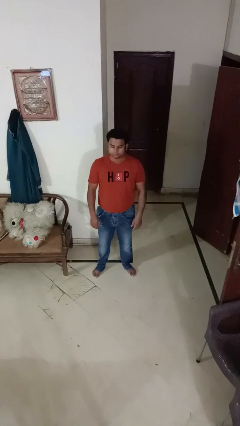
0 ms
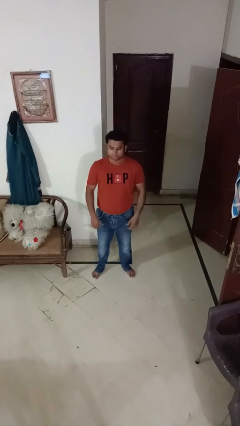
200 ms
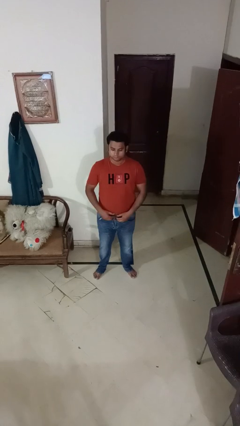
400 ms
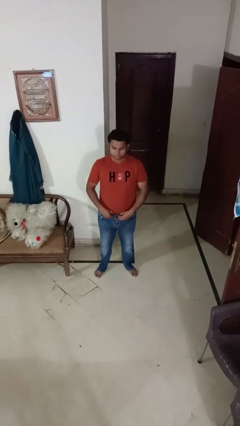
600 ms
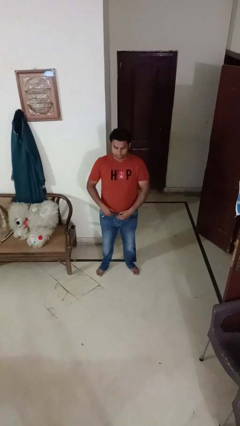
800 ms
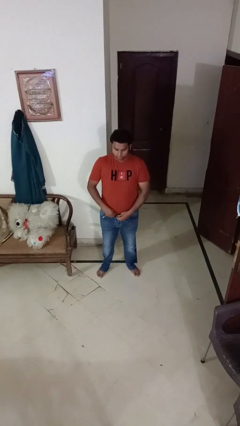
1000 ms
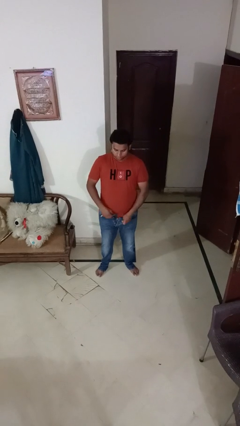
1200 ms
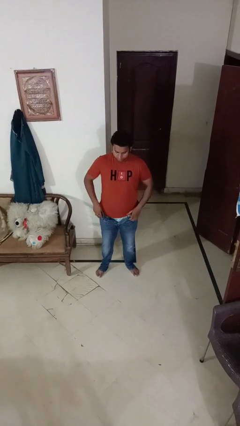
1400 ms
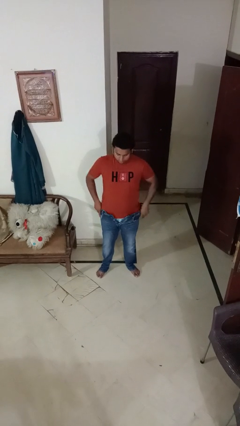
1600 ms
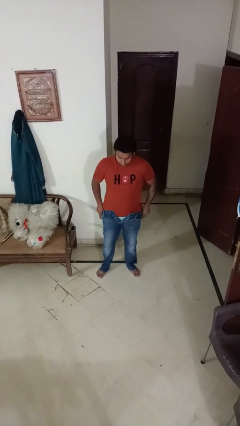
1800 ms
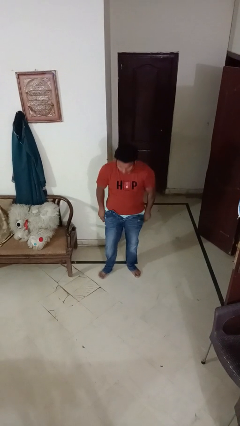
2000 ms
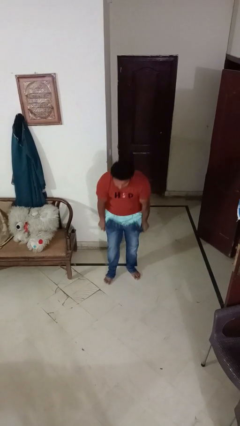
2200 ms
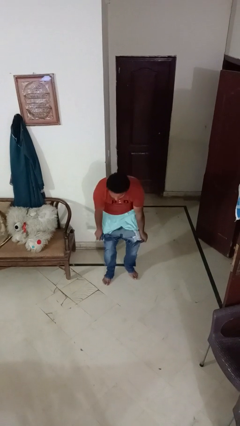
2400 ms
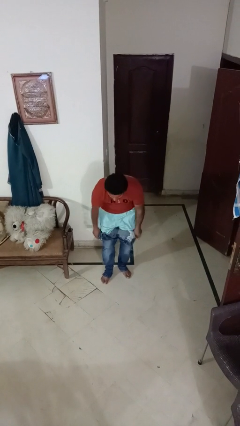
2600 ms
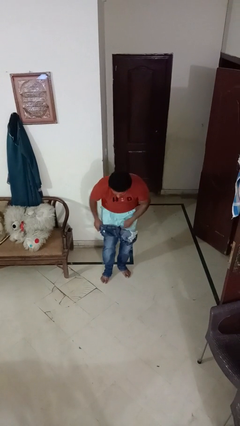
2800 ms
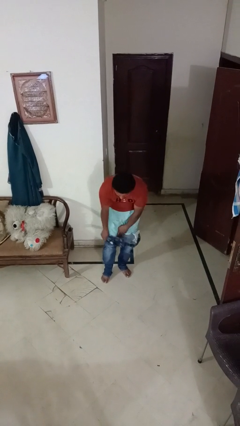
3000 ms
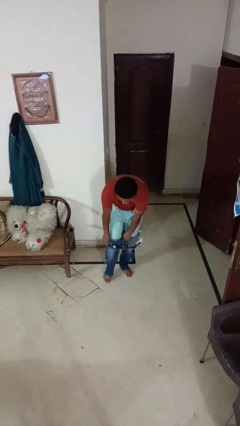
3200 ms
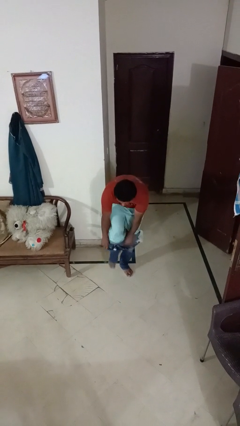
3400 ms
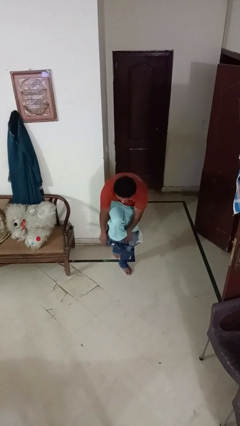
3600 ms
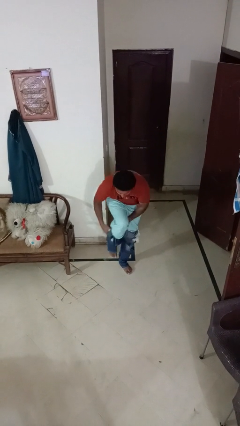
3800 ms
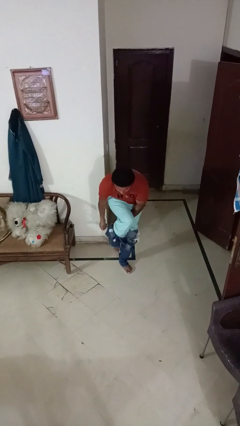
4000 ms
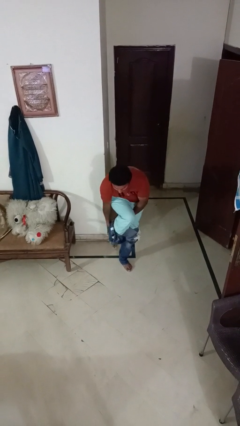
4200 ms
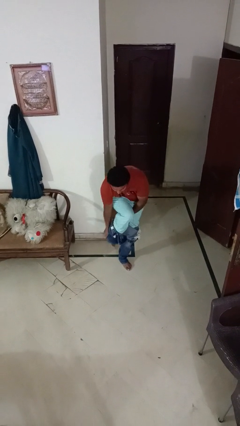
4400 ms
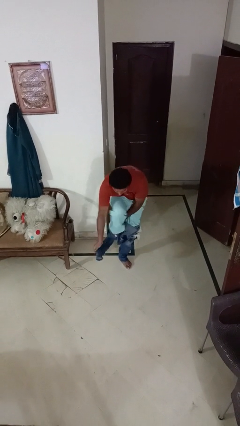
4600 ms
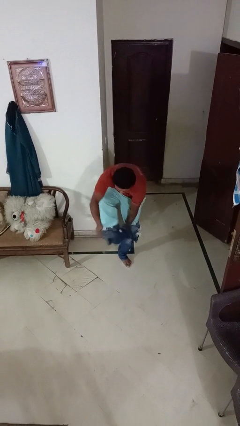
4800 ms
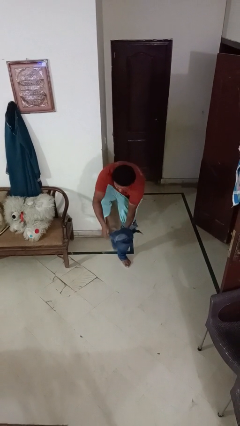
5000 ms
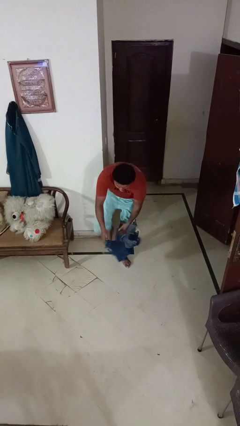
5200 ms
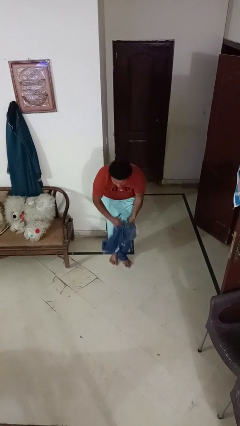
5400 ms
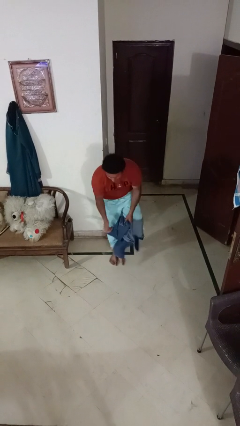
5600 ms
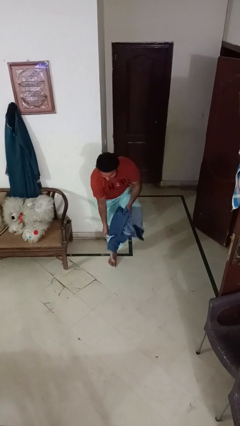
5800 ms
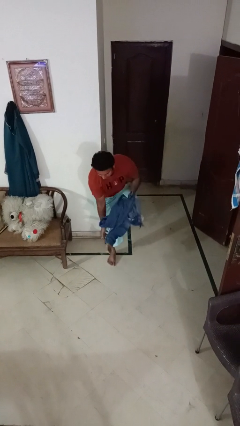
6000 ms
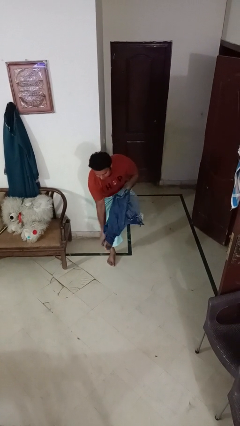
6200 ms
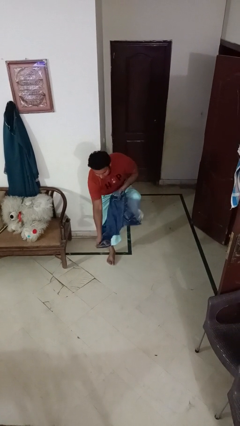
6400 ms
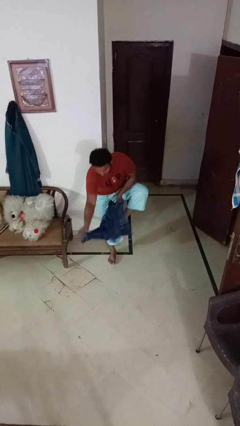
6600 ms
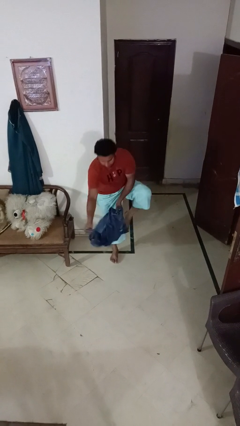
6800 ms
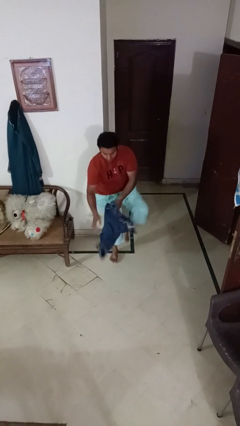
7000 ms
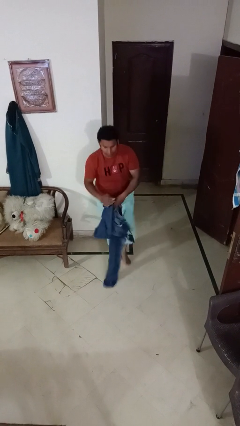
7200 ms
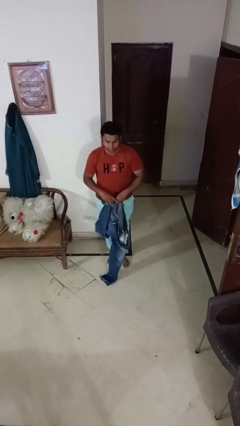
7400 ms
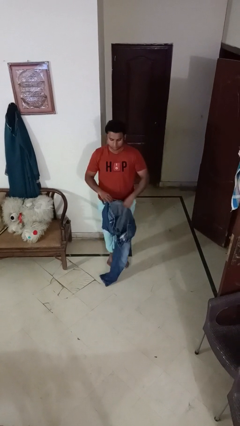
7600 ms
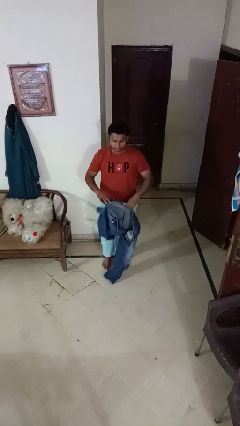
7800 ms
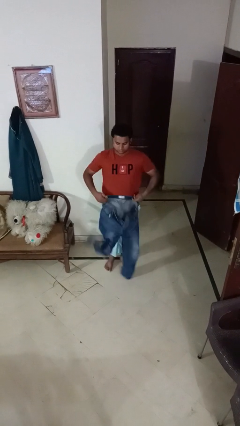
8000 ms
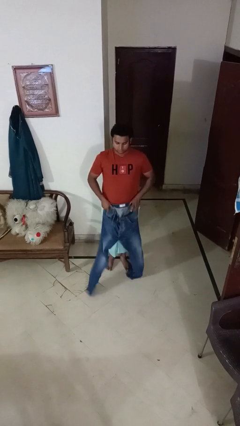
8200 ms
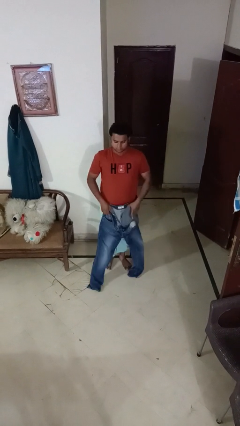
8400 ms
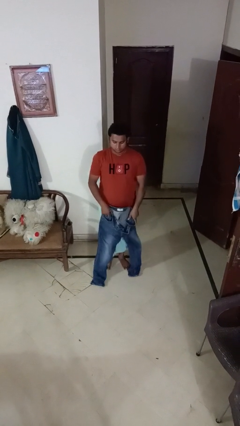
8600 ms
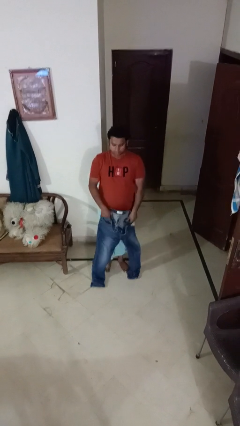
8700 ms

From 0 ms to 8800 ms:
person takes off pants

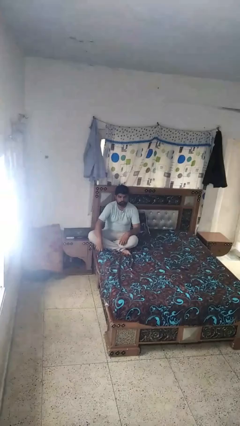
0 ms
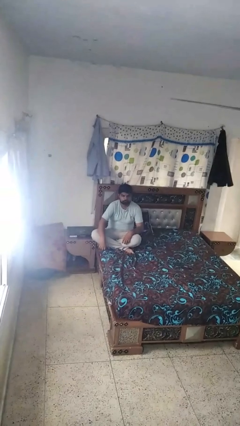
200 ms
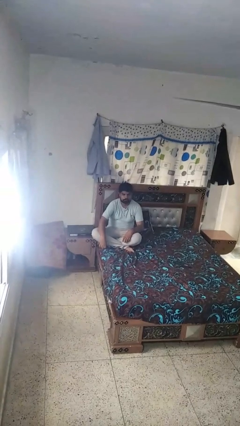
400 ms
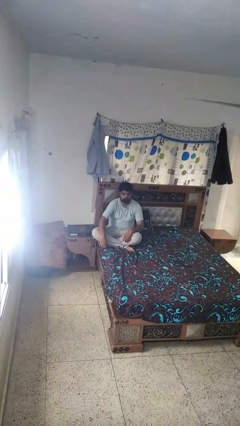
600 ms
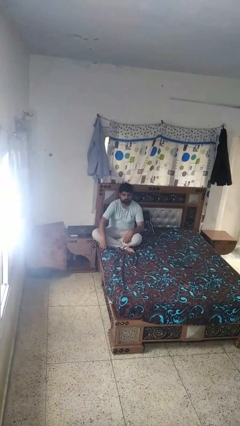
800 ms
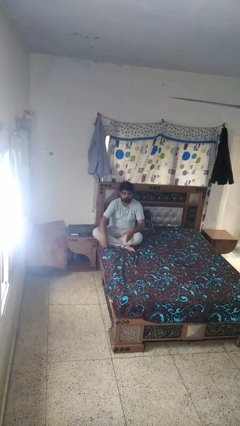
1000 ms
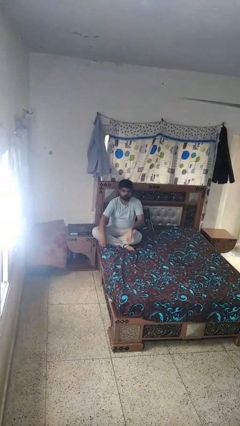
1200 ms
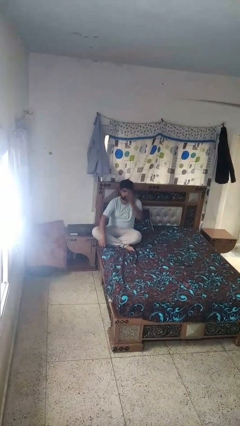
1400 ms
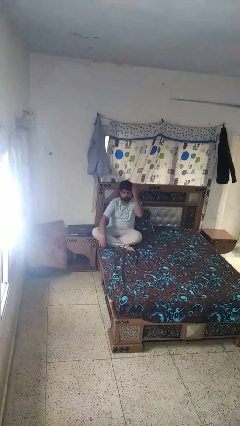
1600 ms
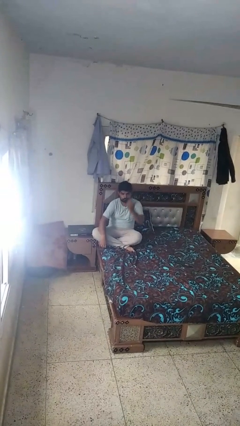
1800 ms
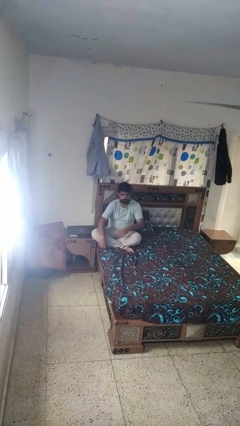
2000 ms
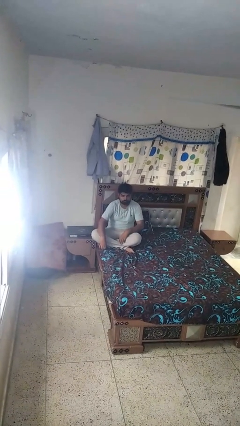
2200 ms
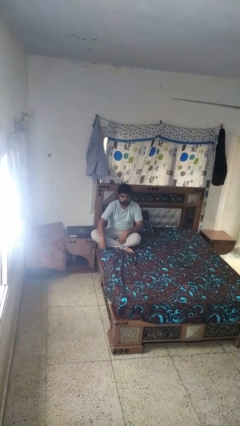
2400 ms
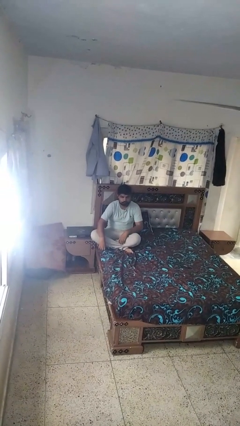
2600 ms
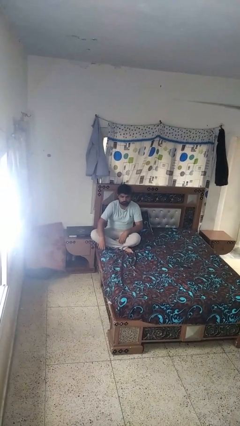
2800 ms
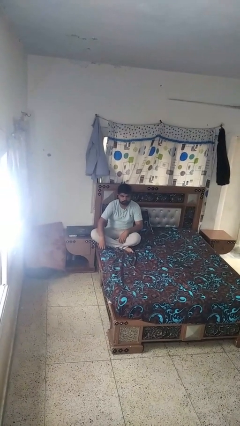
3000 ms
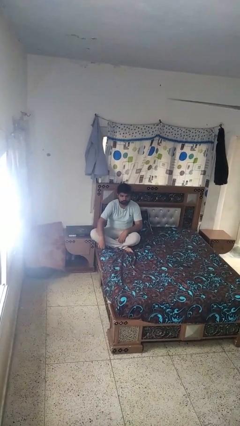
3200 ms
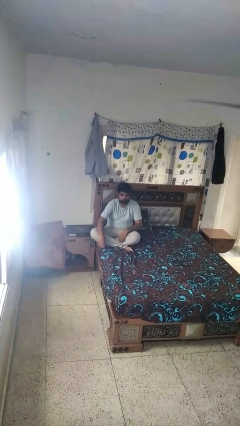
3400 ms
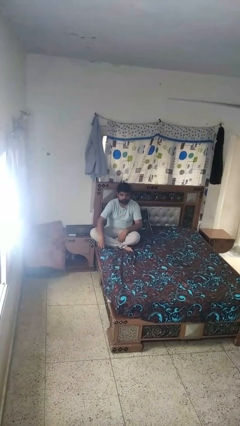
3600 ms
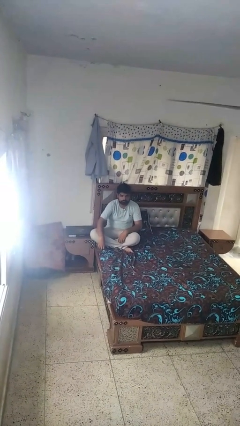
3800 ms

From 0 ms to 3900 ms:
person gestures swipe up

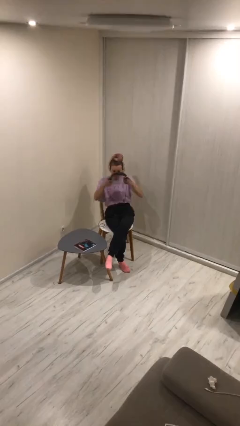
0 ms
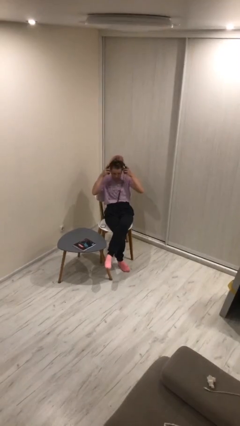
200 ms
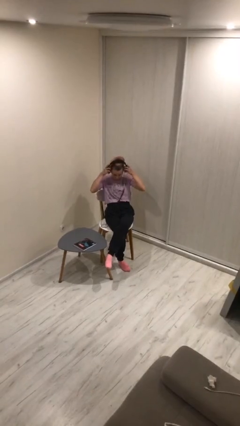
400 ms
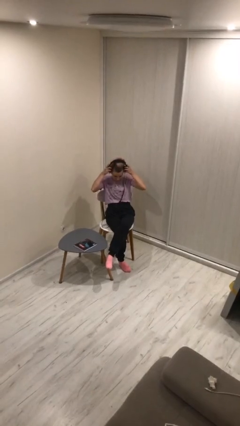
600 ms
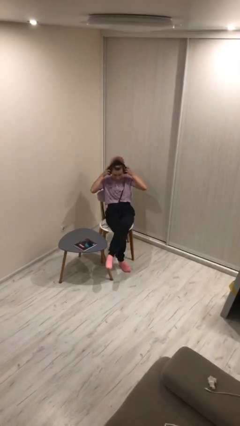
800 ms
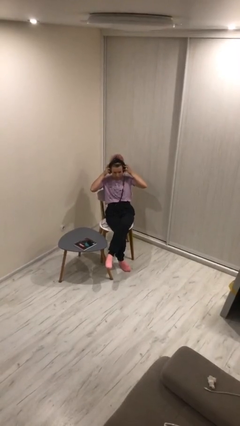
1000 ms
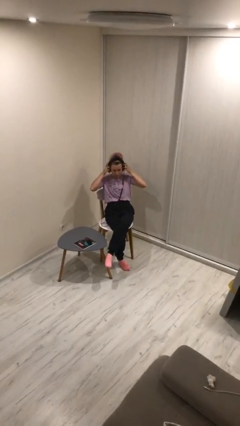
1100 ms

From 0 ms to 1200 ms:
person puts on headphones

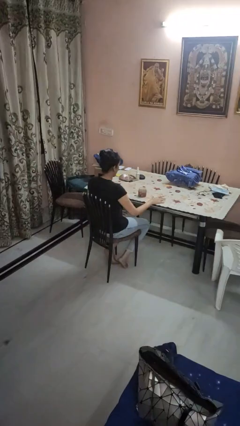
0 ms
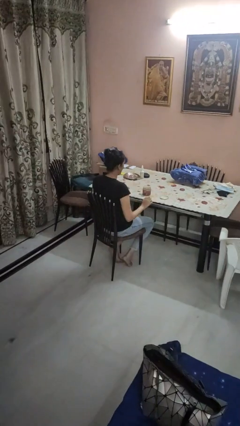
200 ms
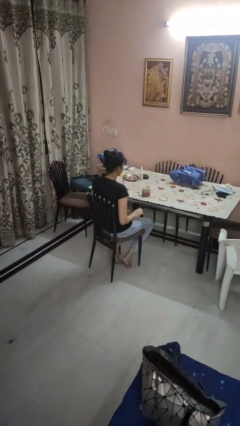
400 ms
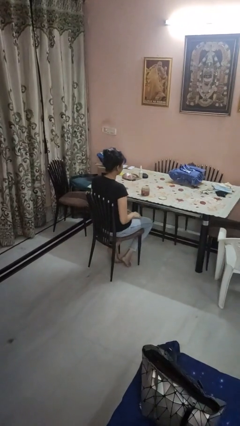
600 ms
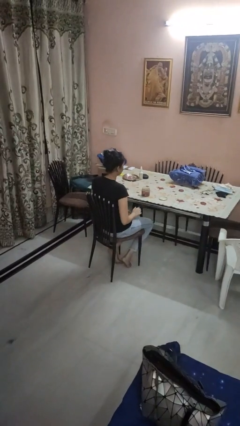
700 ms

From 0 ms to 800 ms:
person opens jar

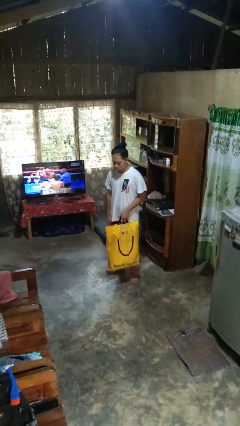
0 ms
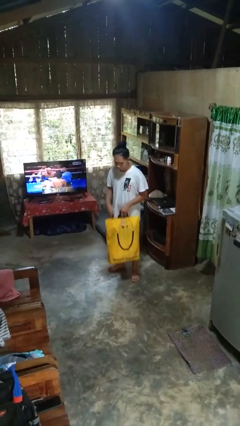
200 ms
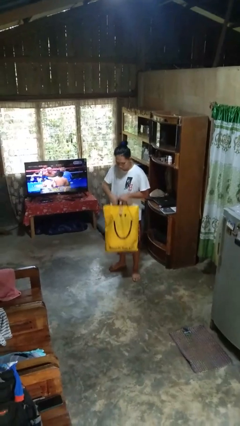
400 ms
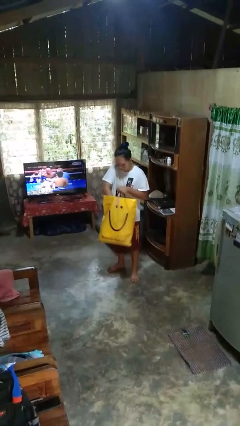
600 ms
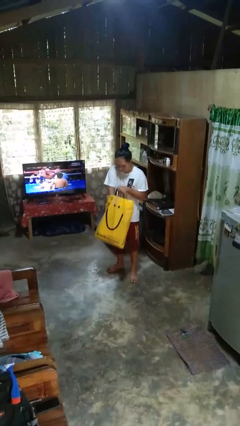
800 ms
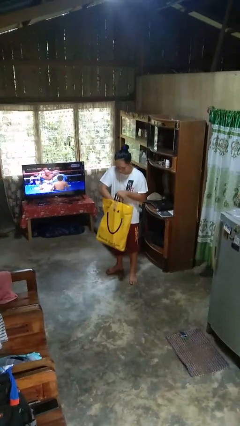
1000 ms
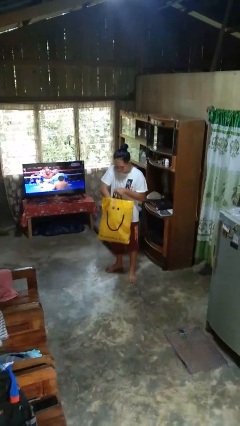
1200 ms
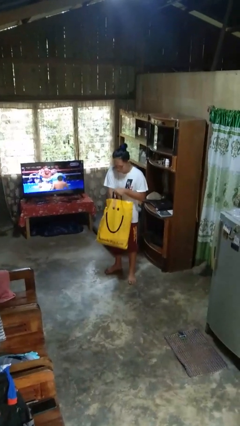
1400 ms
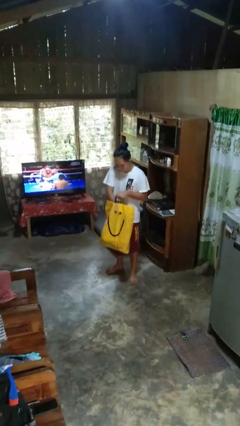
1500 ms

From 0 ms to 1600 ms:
person searches in bag

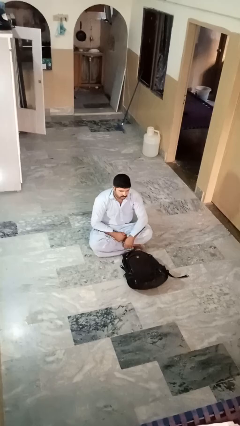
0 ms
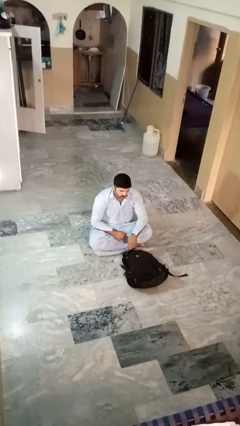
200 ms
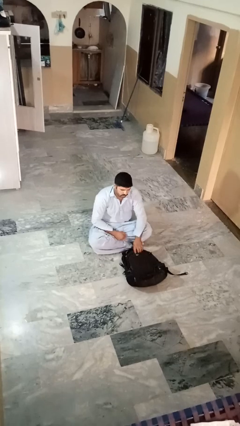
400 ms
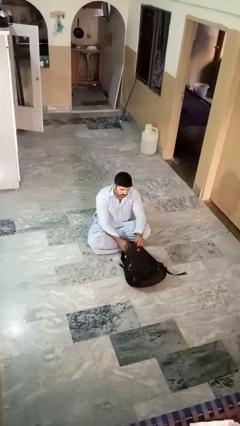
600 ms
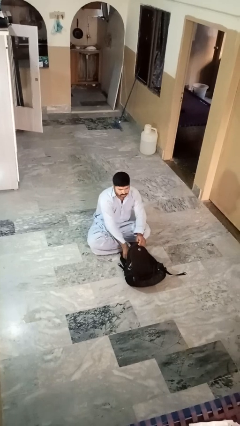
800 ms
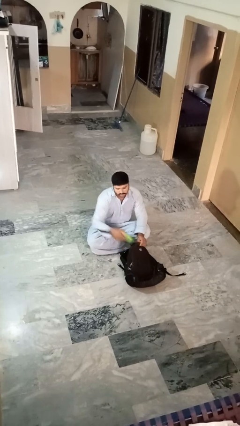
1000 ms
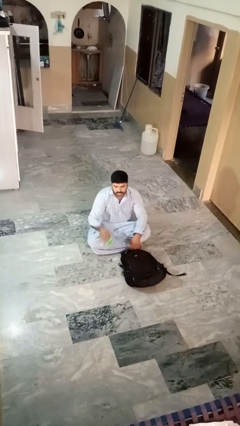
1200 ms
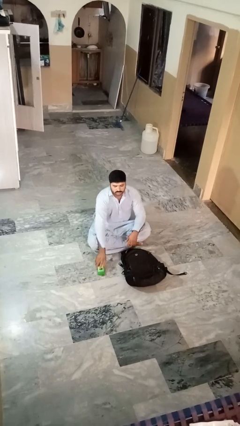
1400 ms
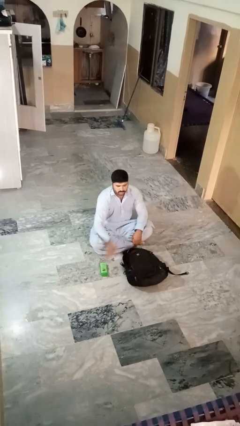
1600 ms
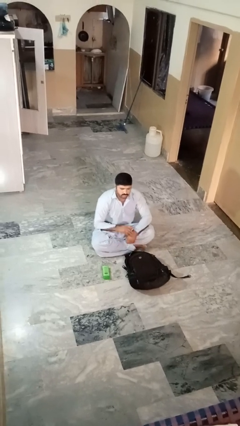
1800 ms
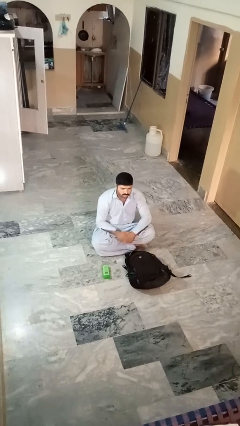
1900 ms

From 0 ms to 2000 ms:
person takes object from bag
